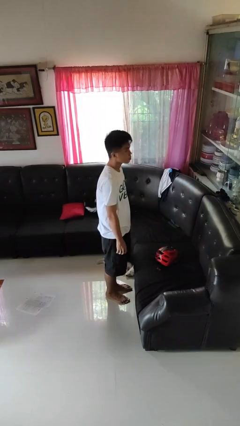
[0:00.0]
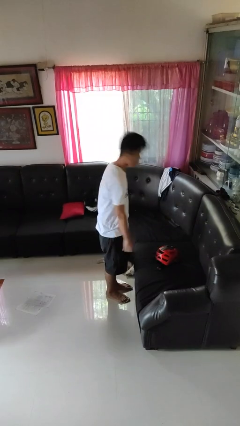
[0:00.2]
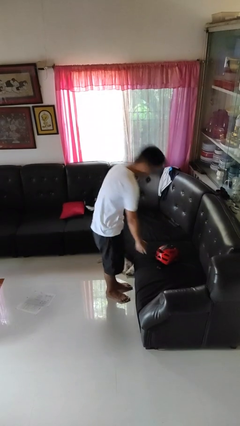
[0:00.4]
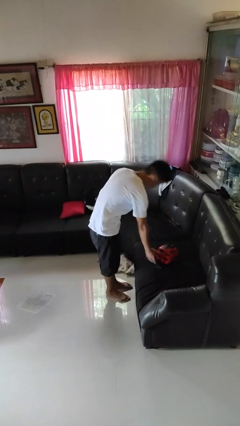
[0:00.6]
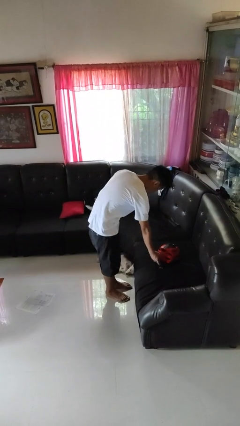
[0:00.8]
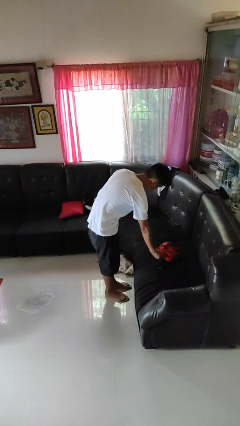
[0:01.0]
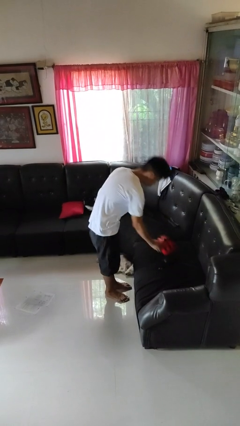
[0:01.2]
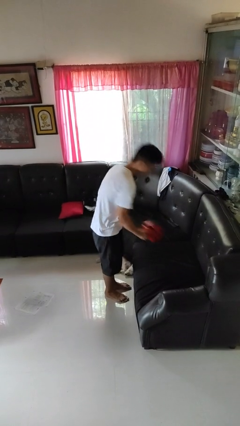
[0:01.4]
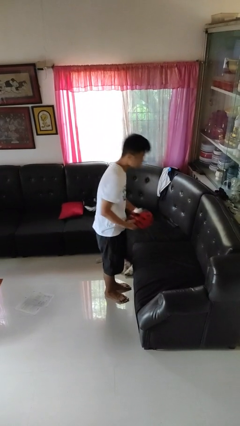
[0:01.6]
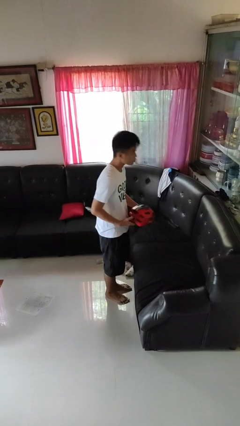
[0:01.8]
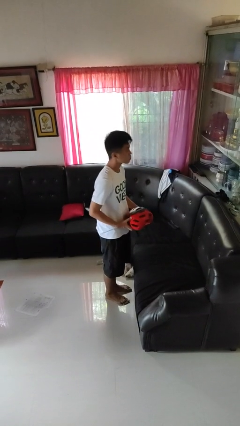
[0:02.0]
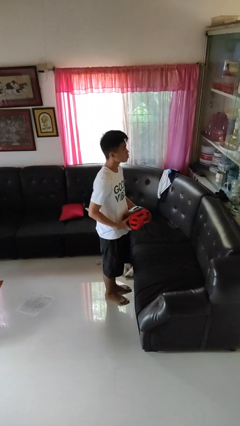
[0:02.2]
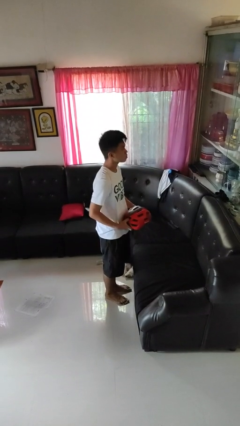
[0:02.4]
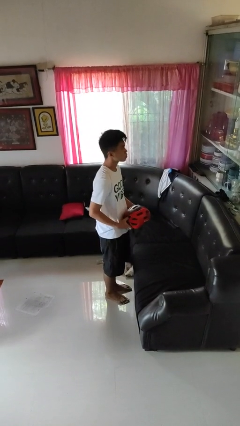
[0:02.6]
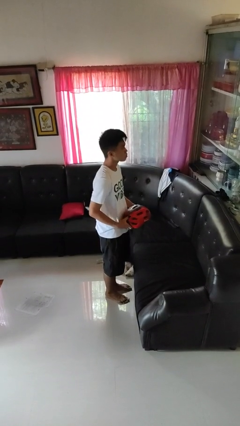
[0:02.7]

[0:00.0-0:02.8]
person picks up object from couch

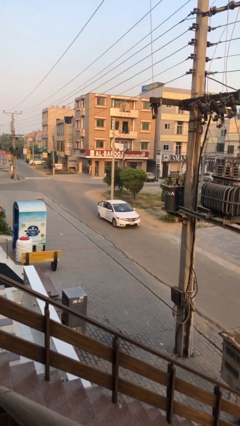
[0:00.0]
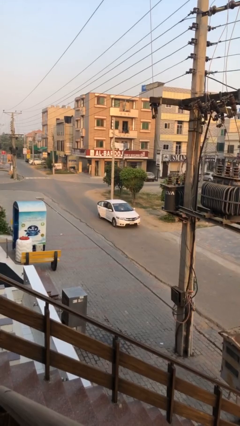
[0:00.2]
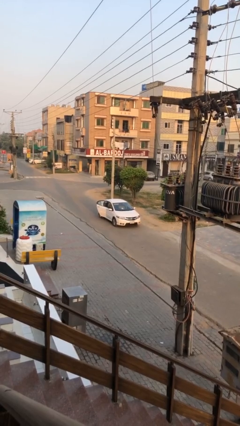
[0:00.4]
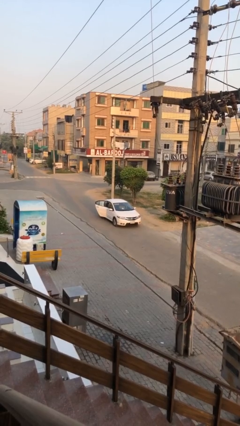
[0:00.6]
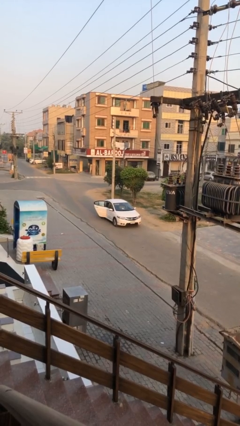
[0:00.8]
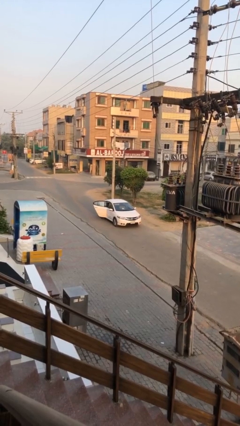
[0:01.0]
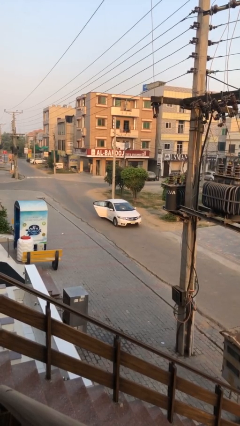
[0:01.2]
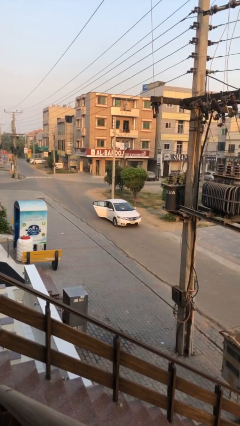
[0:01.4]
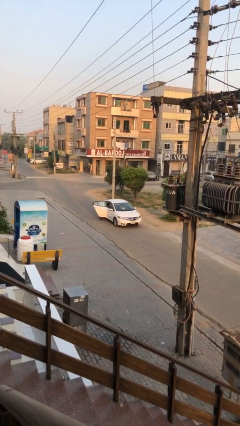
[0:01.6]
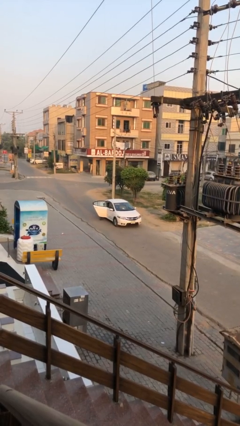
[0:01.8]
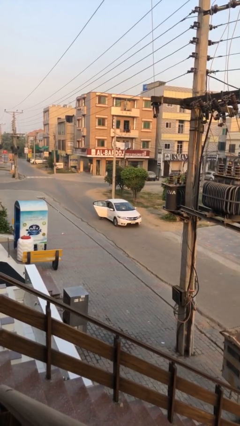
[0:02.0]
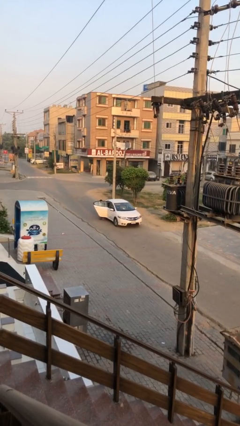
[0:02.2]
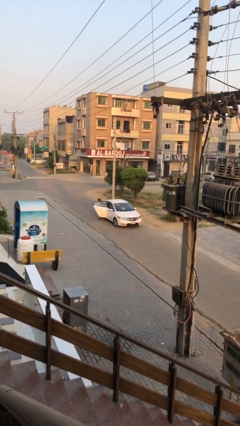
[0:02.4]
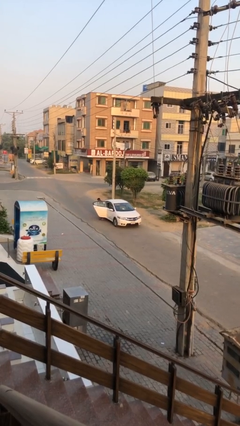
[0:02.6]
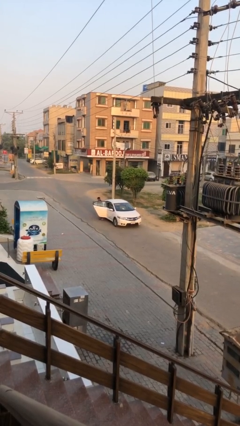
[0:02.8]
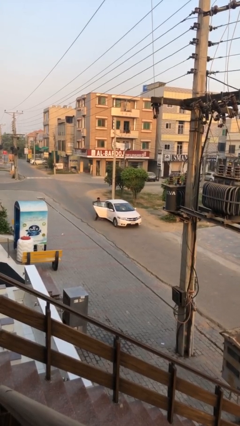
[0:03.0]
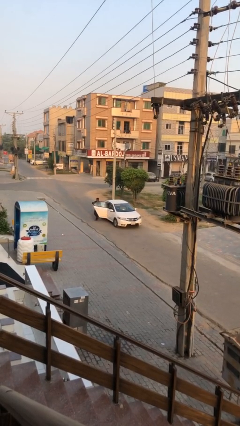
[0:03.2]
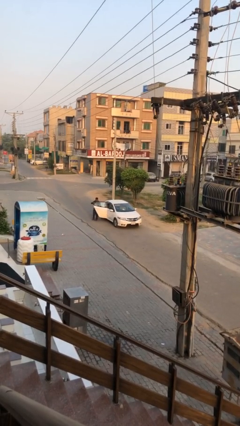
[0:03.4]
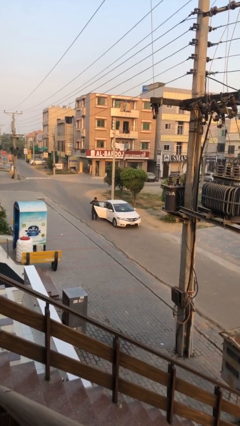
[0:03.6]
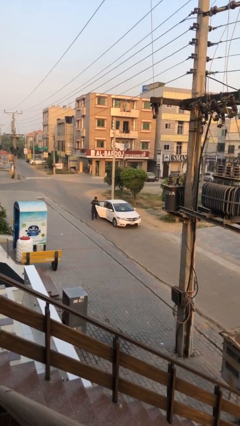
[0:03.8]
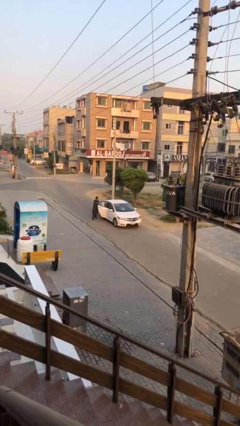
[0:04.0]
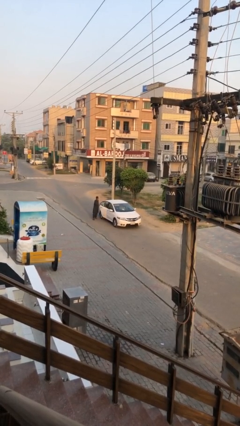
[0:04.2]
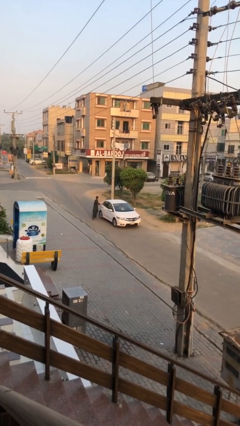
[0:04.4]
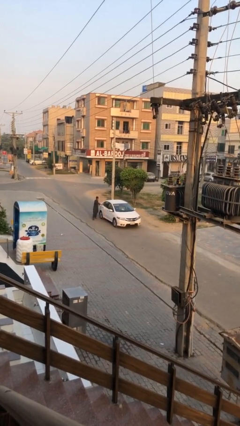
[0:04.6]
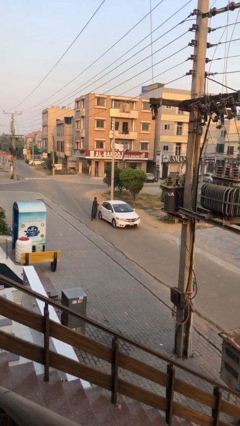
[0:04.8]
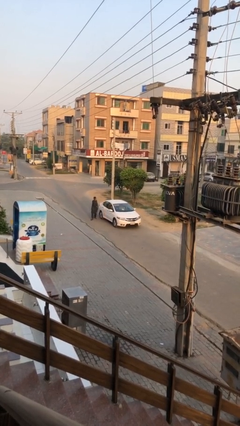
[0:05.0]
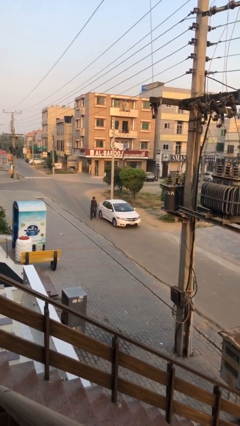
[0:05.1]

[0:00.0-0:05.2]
car drops off person

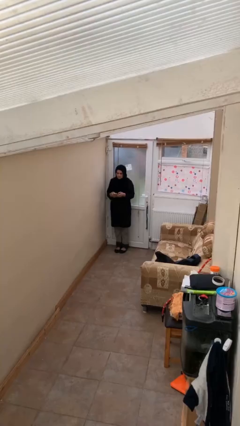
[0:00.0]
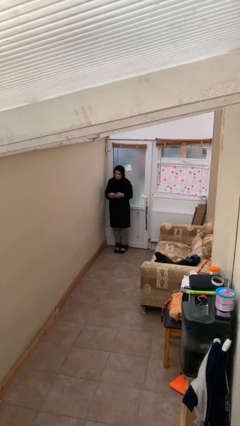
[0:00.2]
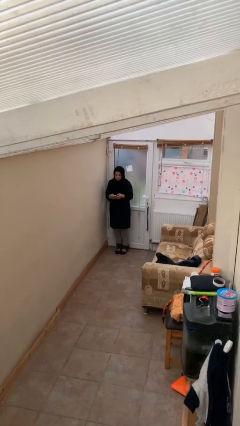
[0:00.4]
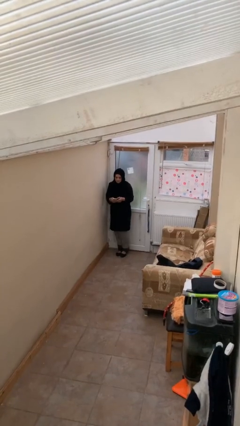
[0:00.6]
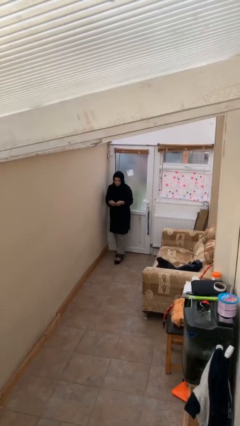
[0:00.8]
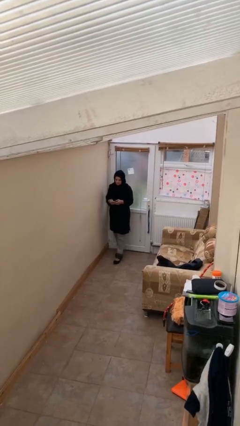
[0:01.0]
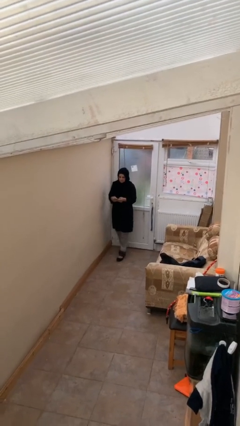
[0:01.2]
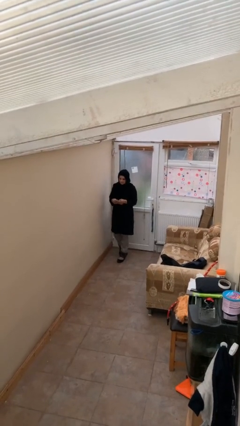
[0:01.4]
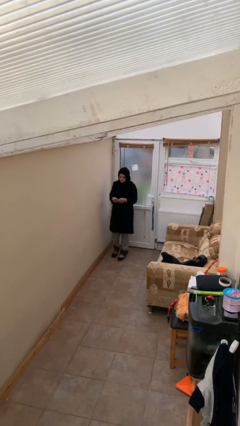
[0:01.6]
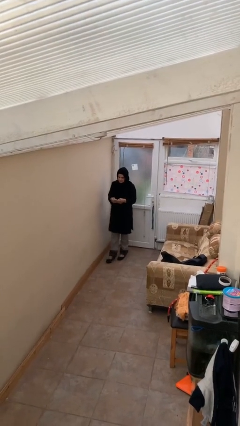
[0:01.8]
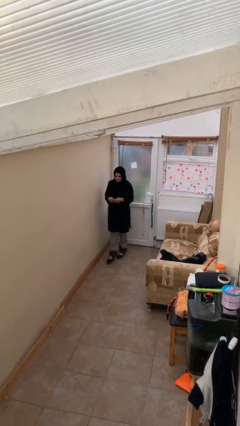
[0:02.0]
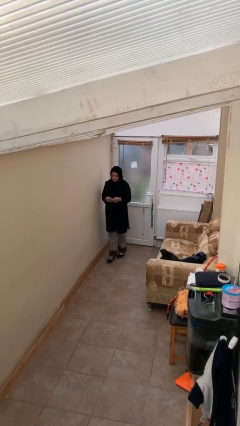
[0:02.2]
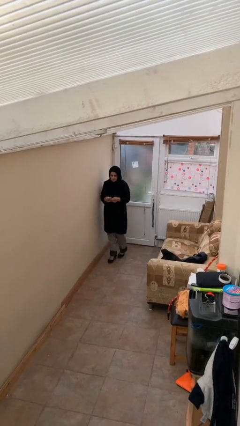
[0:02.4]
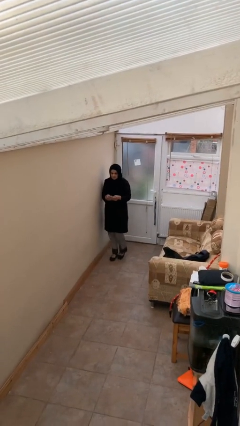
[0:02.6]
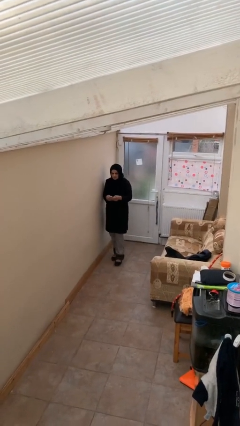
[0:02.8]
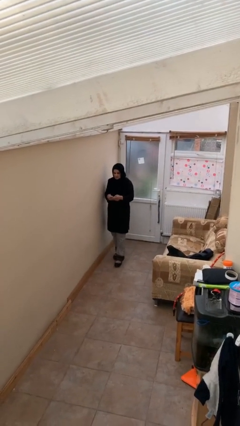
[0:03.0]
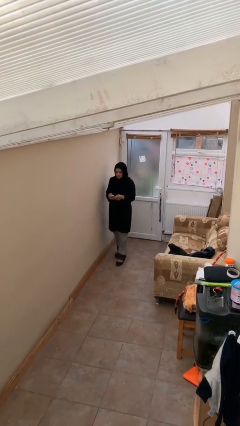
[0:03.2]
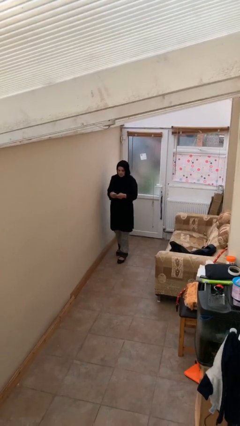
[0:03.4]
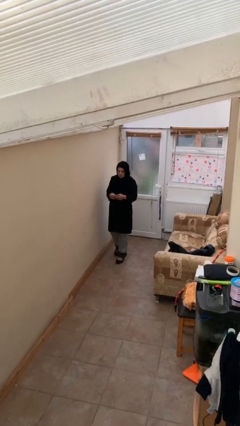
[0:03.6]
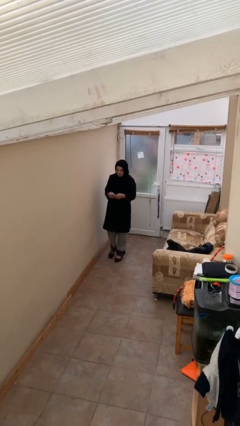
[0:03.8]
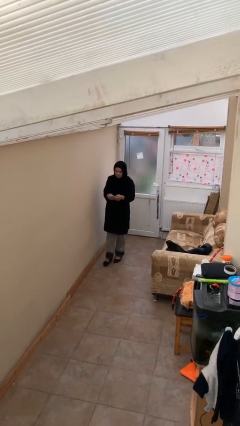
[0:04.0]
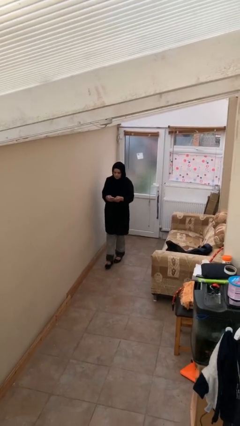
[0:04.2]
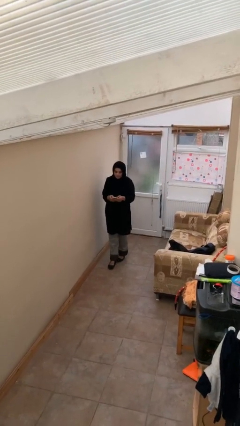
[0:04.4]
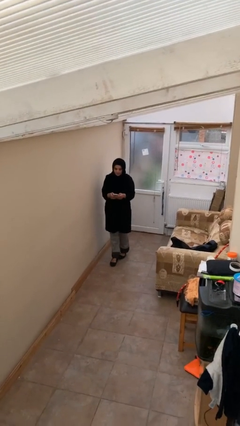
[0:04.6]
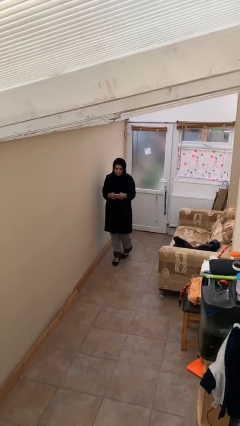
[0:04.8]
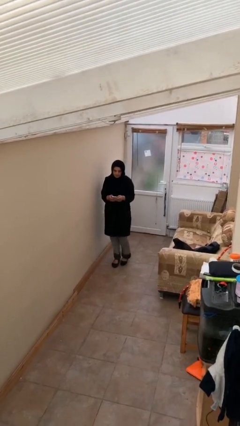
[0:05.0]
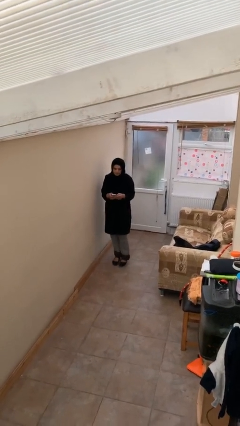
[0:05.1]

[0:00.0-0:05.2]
person texts on phone

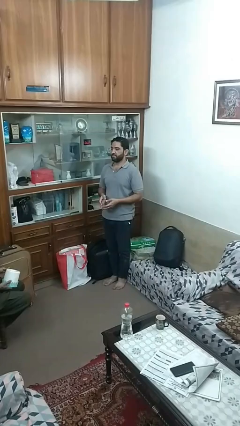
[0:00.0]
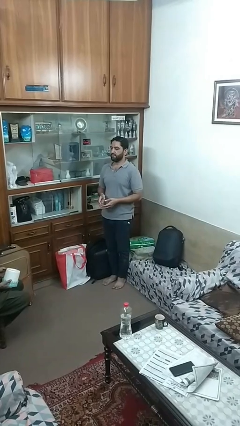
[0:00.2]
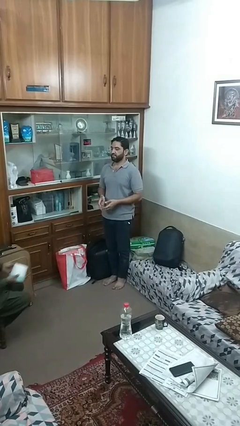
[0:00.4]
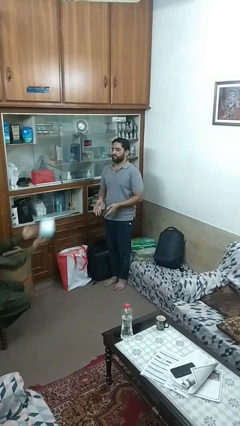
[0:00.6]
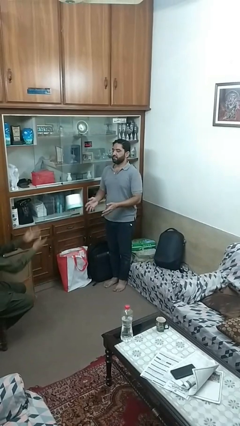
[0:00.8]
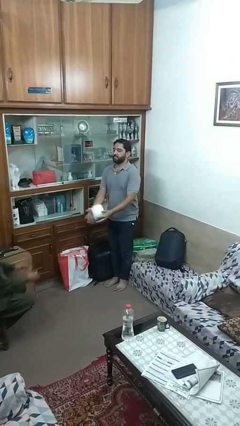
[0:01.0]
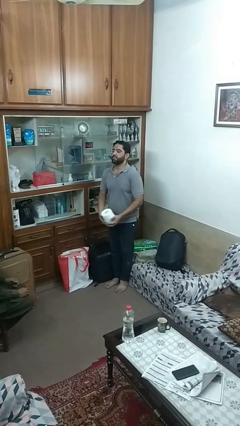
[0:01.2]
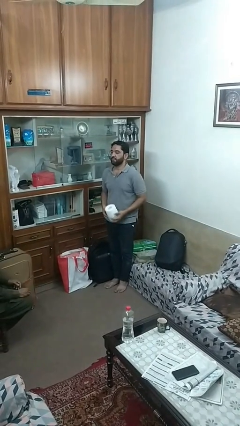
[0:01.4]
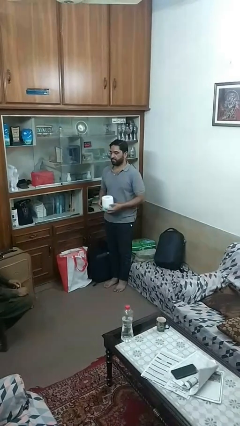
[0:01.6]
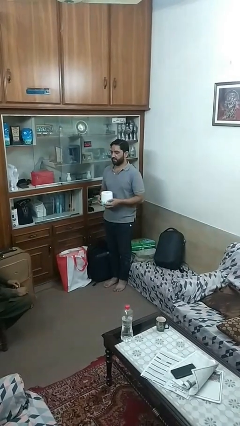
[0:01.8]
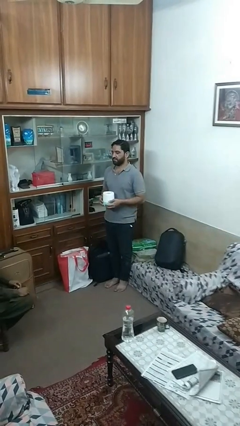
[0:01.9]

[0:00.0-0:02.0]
person catches object from person

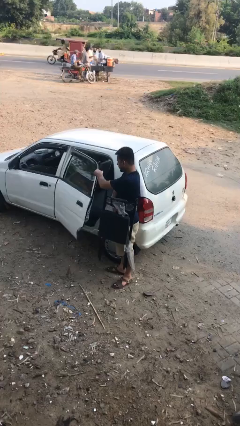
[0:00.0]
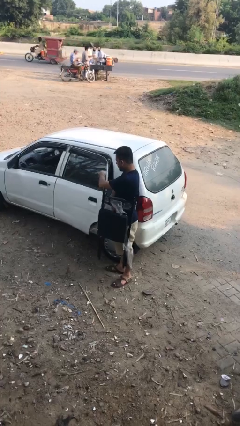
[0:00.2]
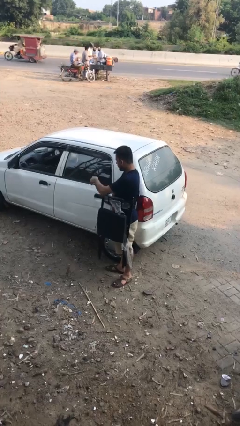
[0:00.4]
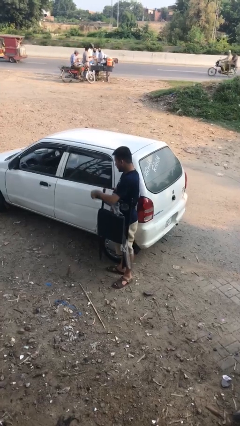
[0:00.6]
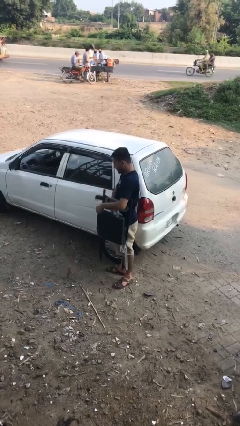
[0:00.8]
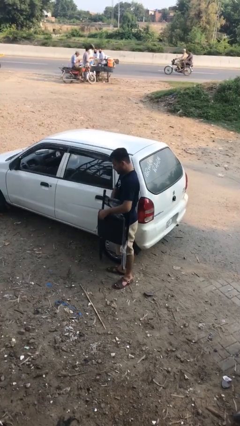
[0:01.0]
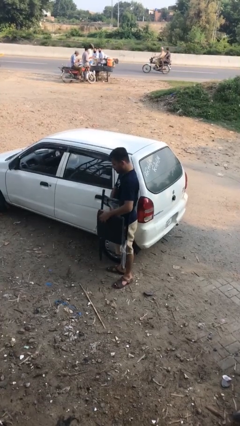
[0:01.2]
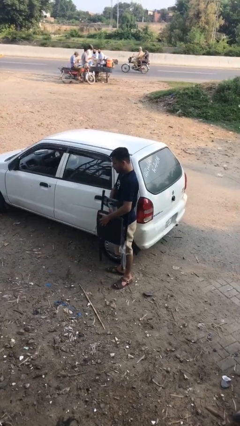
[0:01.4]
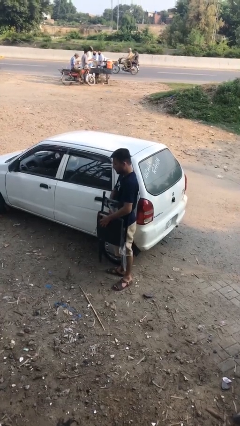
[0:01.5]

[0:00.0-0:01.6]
person closes car door

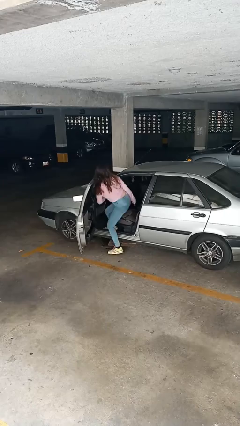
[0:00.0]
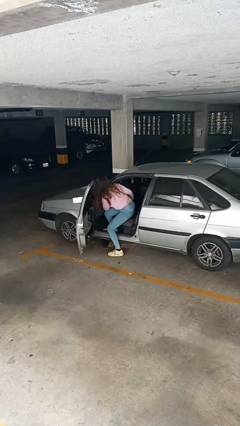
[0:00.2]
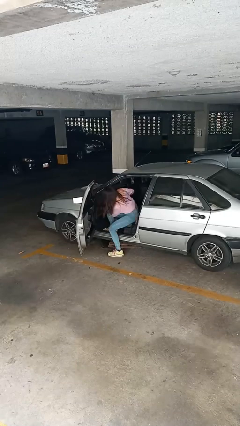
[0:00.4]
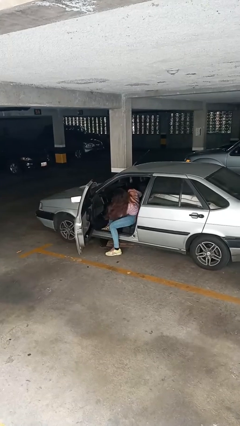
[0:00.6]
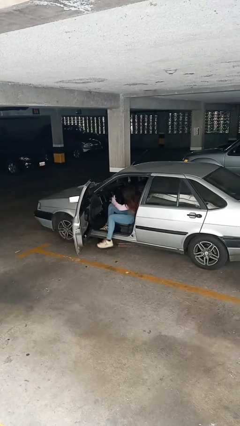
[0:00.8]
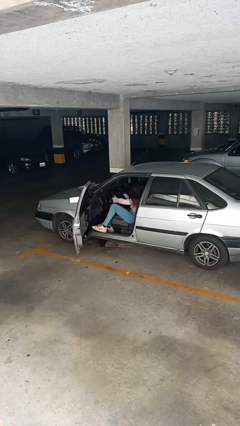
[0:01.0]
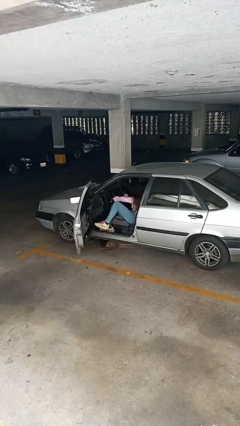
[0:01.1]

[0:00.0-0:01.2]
person enters car
